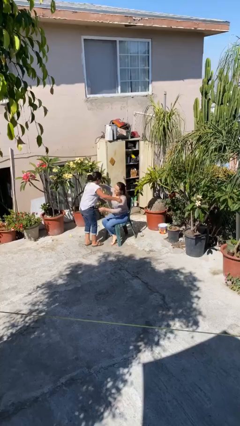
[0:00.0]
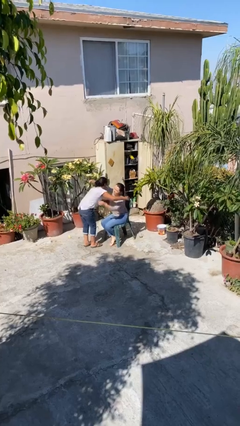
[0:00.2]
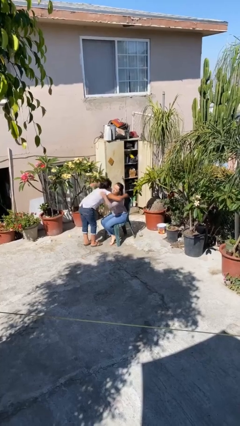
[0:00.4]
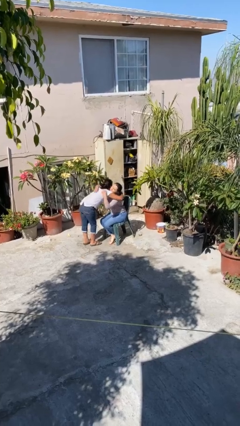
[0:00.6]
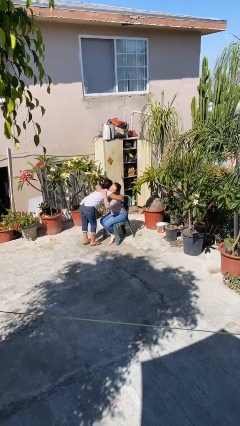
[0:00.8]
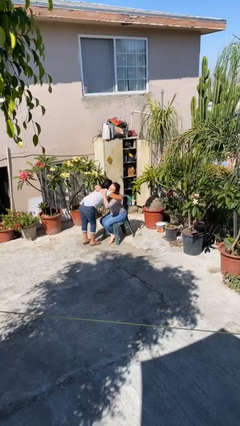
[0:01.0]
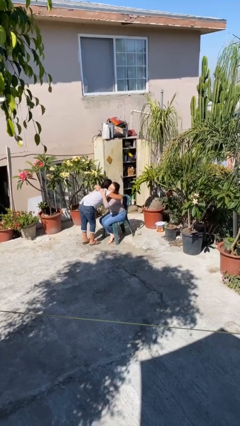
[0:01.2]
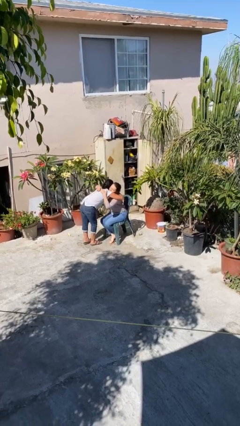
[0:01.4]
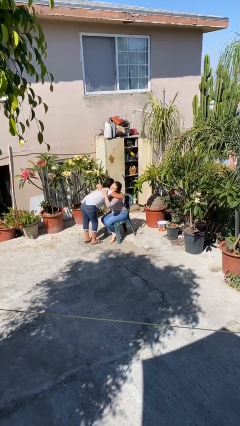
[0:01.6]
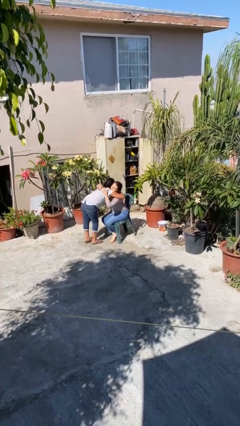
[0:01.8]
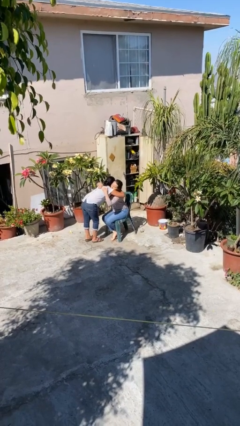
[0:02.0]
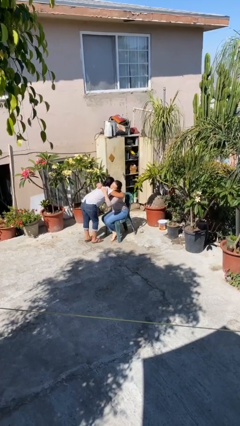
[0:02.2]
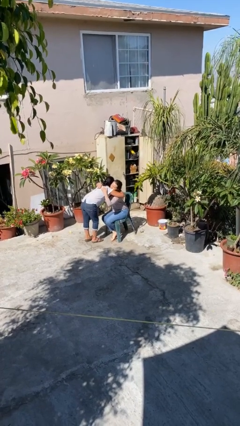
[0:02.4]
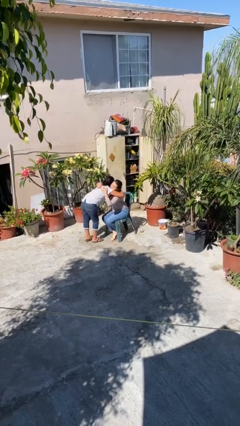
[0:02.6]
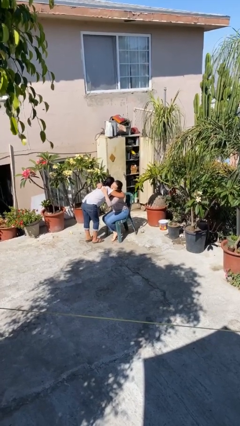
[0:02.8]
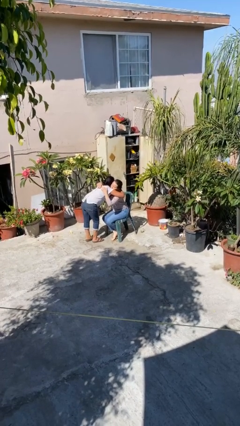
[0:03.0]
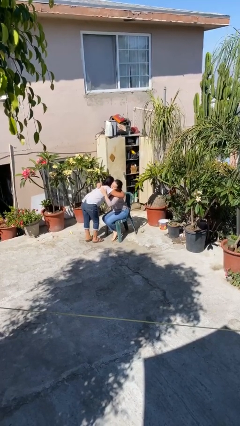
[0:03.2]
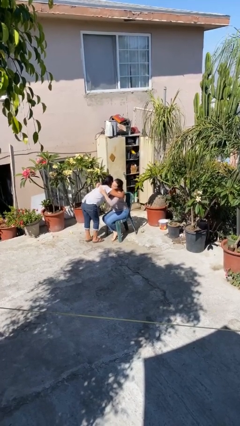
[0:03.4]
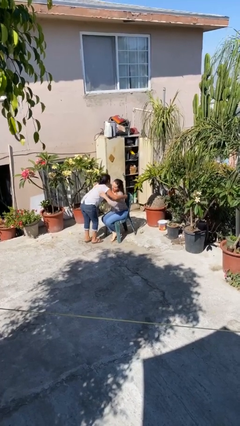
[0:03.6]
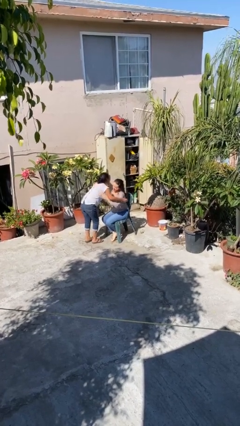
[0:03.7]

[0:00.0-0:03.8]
person embraces person

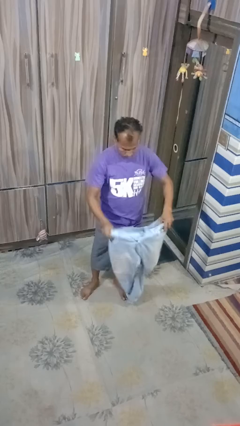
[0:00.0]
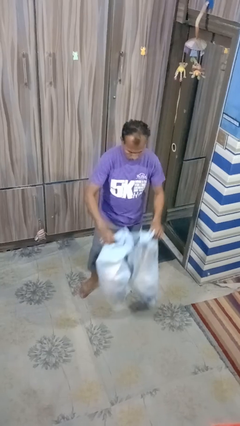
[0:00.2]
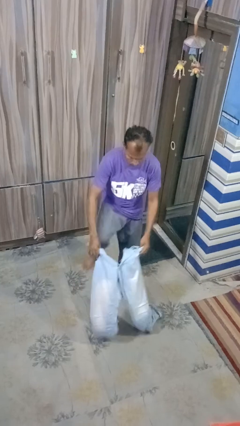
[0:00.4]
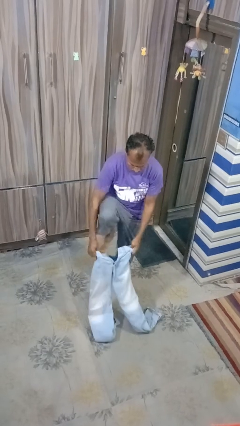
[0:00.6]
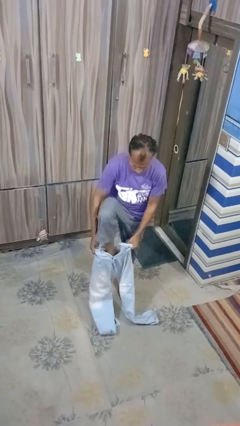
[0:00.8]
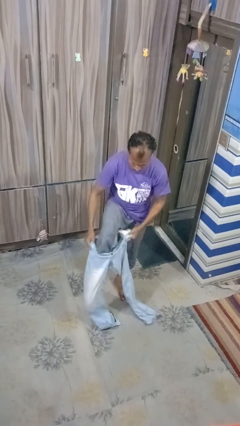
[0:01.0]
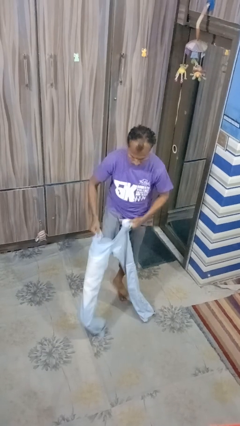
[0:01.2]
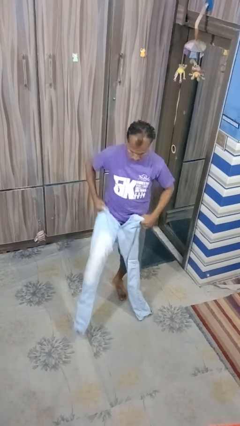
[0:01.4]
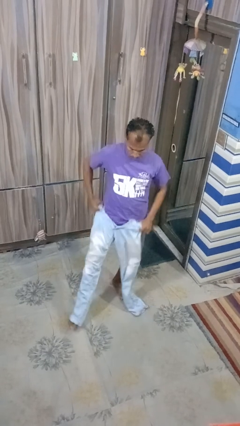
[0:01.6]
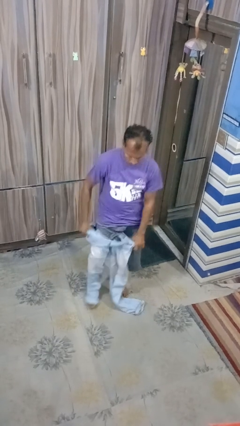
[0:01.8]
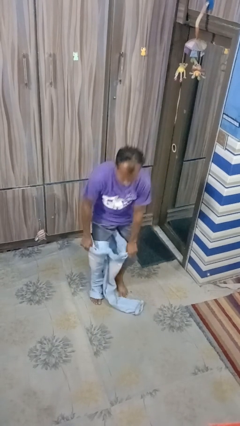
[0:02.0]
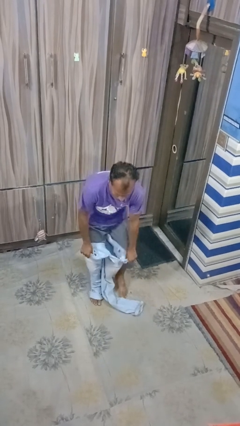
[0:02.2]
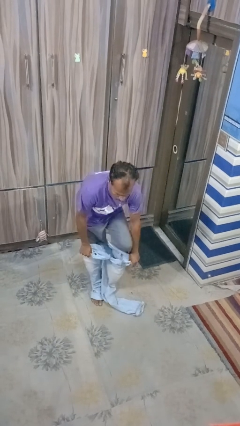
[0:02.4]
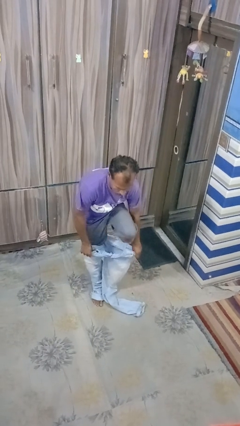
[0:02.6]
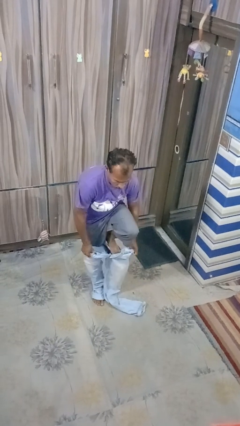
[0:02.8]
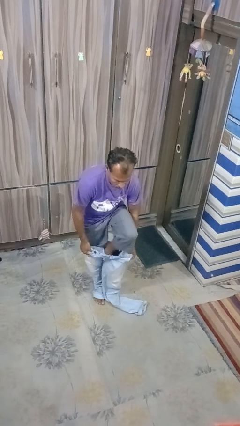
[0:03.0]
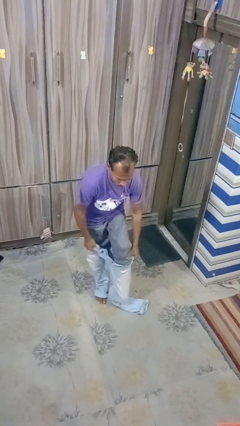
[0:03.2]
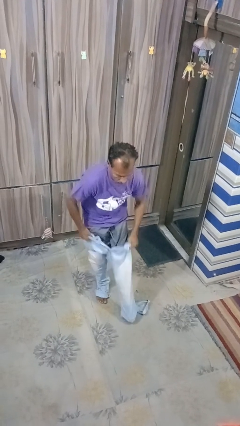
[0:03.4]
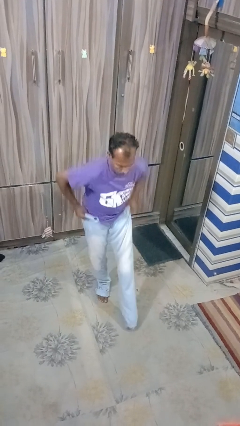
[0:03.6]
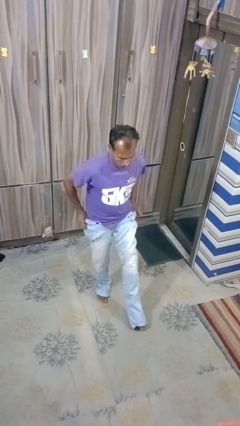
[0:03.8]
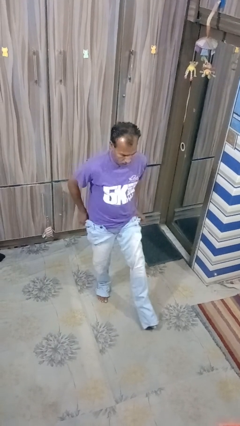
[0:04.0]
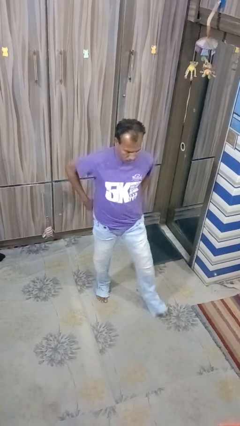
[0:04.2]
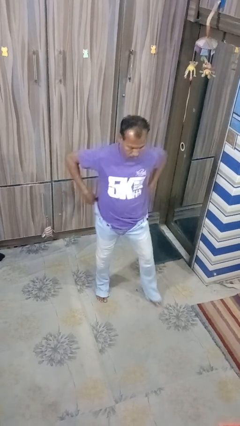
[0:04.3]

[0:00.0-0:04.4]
person puts on pants

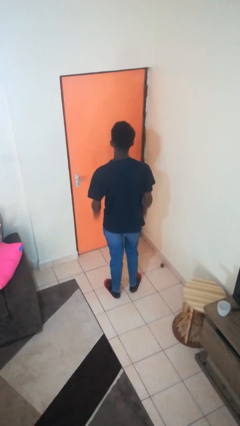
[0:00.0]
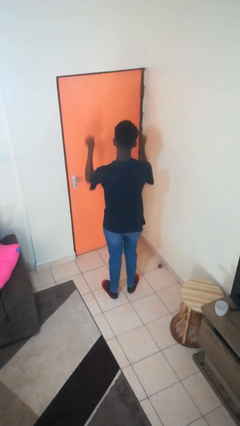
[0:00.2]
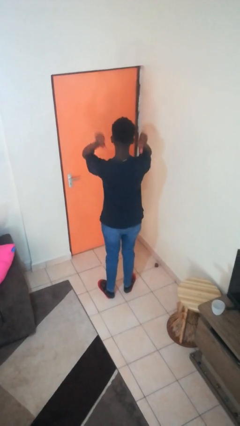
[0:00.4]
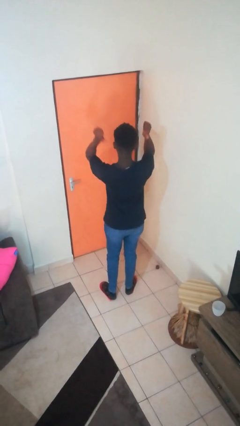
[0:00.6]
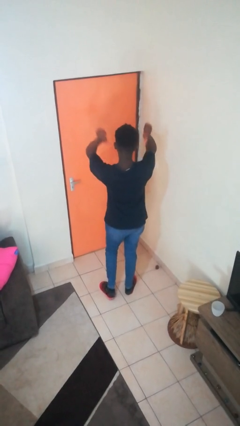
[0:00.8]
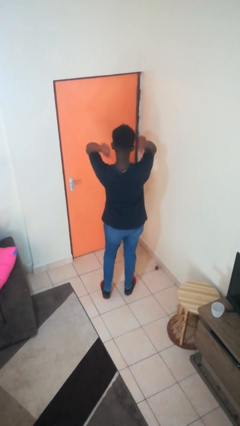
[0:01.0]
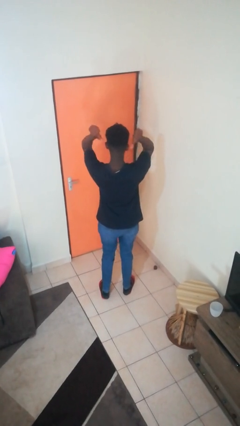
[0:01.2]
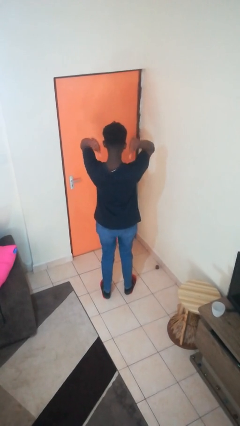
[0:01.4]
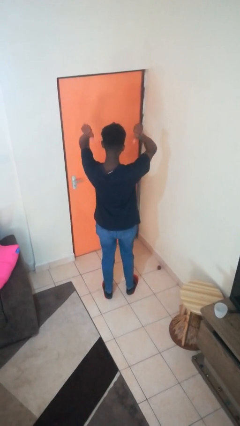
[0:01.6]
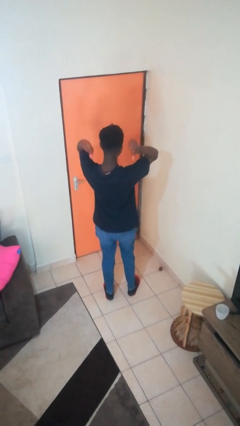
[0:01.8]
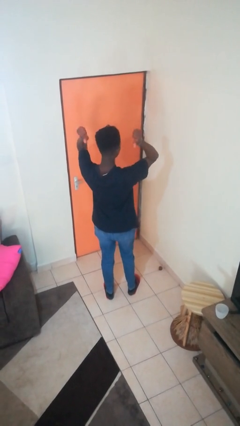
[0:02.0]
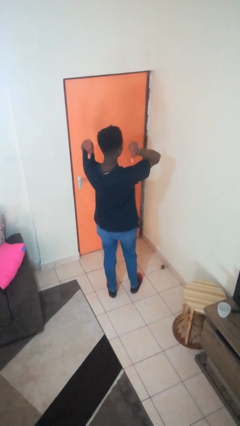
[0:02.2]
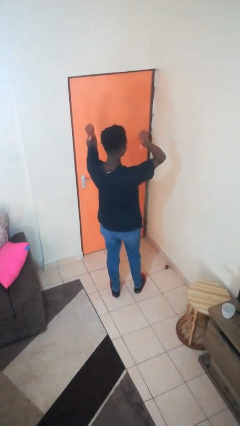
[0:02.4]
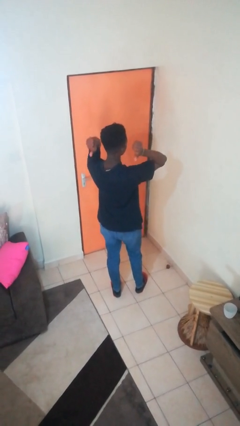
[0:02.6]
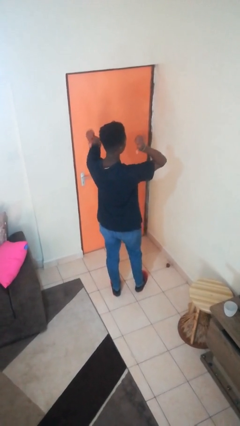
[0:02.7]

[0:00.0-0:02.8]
person gestures behind me

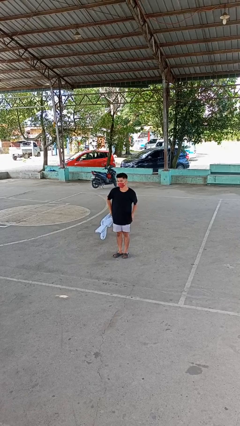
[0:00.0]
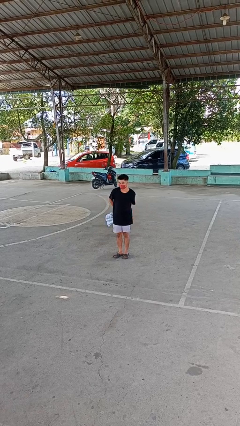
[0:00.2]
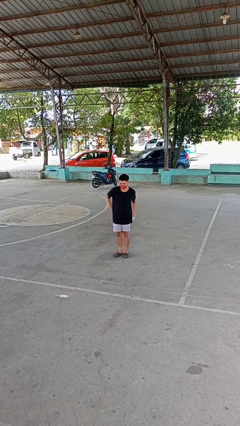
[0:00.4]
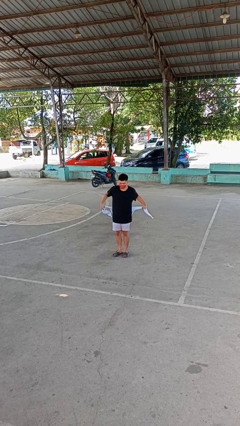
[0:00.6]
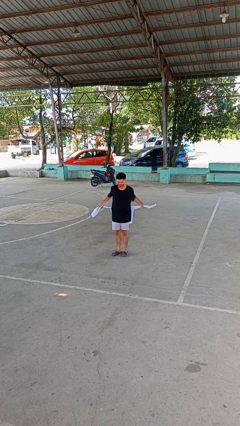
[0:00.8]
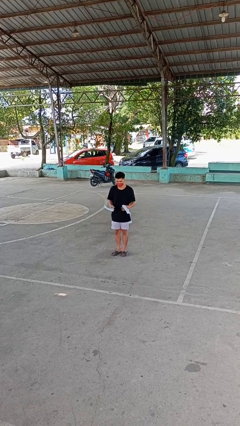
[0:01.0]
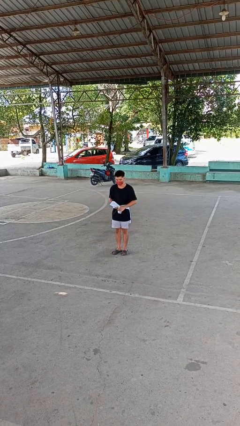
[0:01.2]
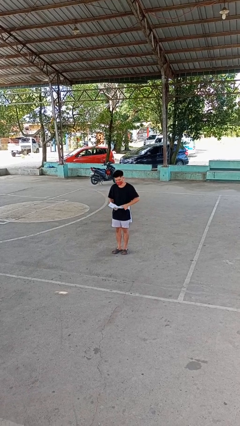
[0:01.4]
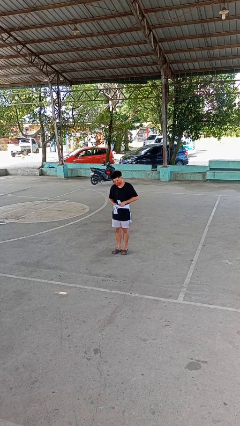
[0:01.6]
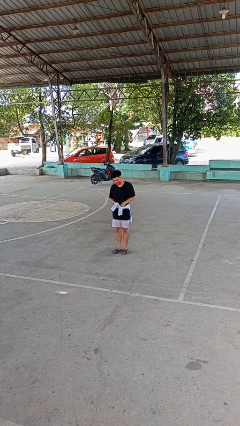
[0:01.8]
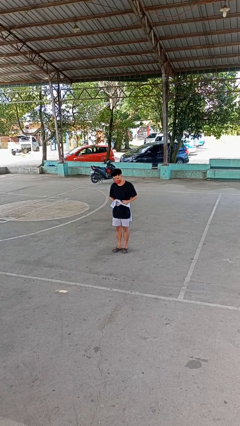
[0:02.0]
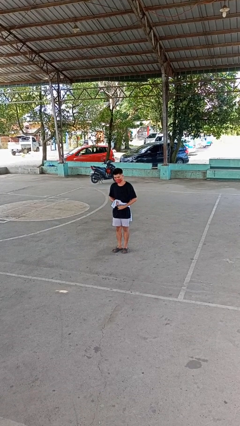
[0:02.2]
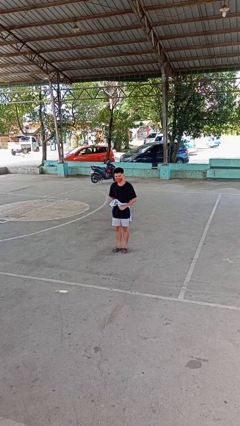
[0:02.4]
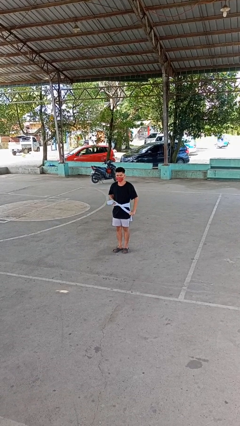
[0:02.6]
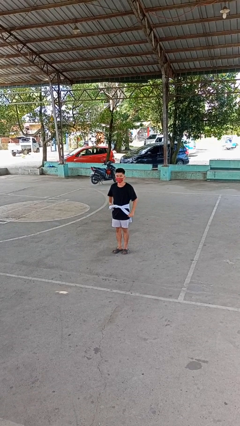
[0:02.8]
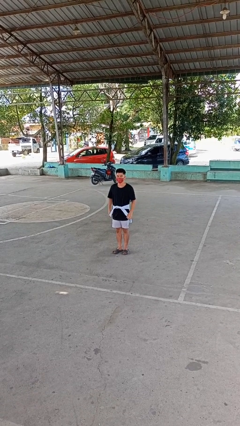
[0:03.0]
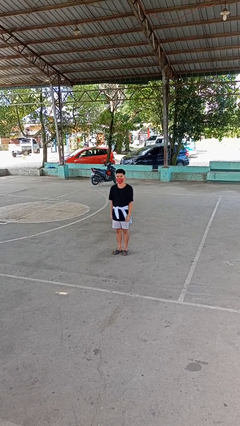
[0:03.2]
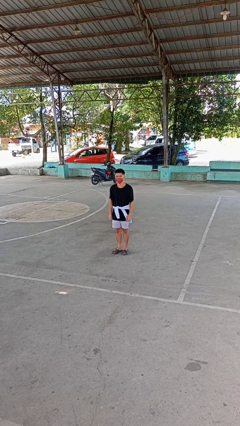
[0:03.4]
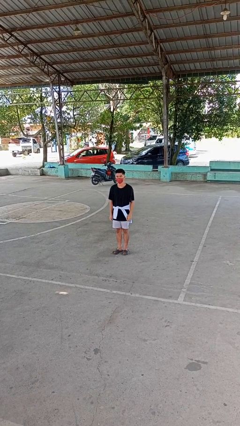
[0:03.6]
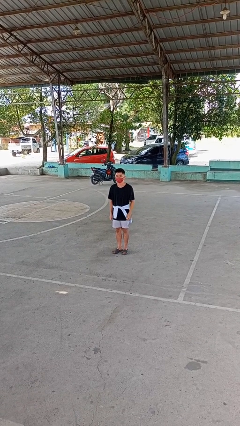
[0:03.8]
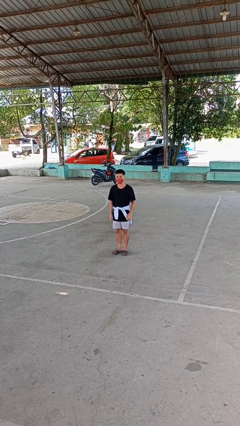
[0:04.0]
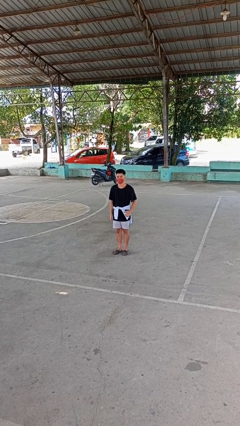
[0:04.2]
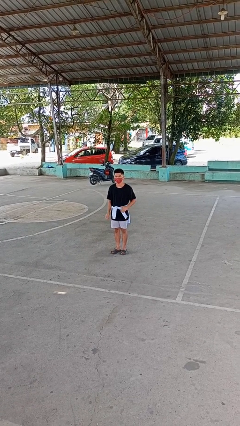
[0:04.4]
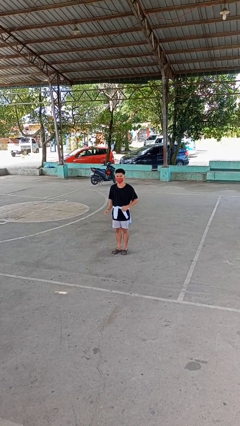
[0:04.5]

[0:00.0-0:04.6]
person ties jacket around waist

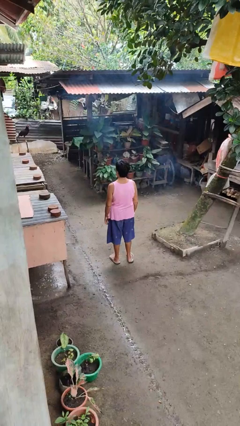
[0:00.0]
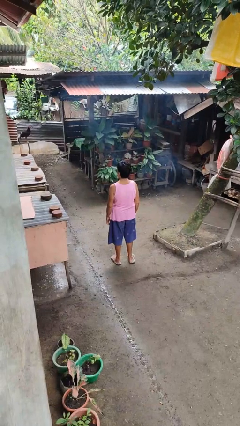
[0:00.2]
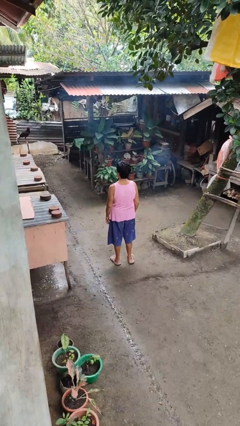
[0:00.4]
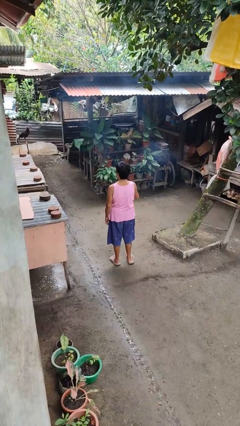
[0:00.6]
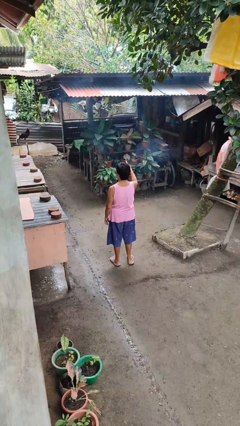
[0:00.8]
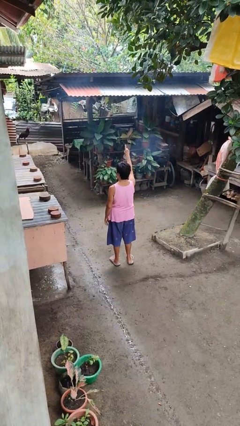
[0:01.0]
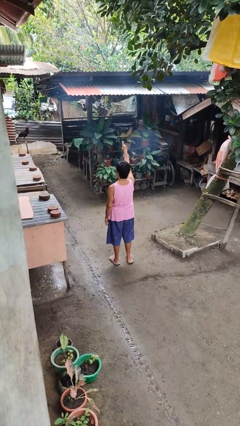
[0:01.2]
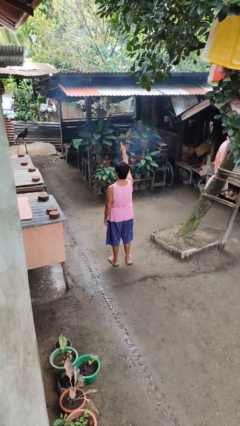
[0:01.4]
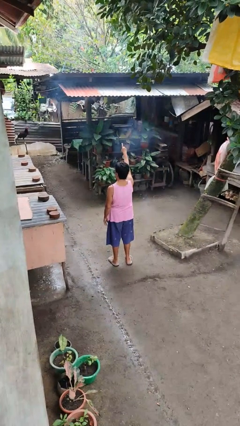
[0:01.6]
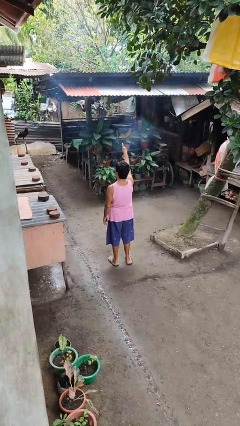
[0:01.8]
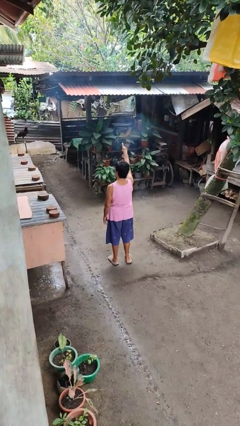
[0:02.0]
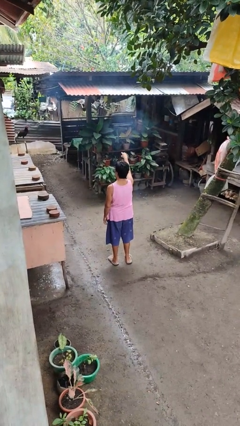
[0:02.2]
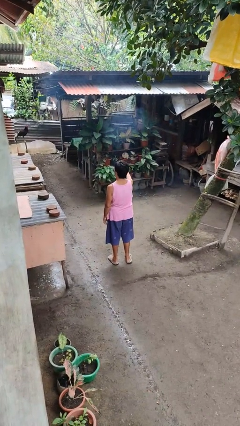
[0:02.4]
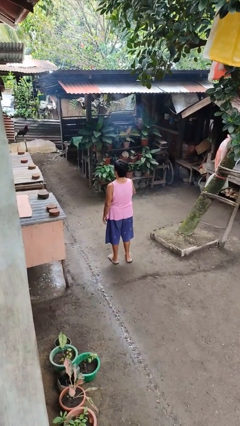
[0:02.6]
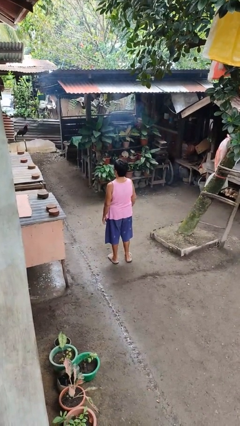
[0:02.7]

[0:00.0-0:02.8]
person points at person
